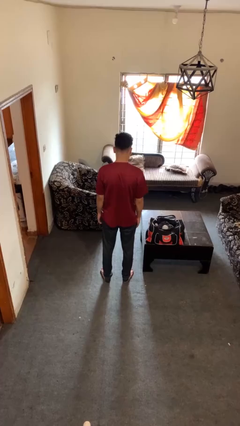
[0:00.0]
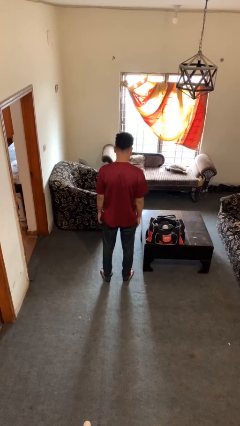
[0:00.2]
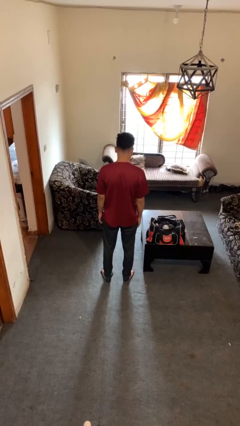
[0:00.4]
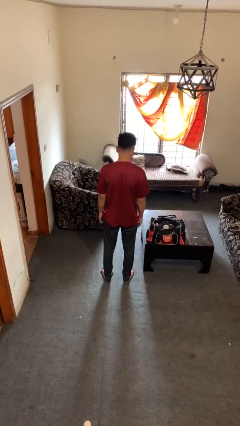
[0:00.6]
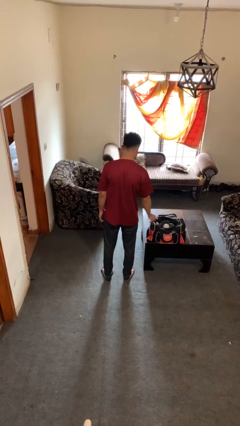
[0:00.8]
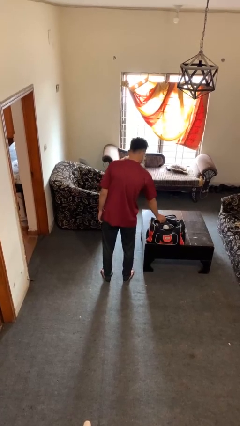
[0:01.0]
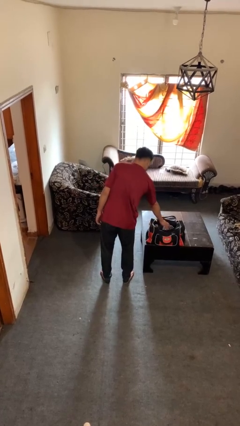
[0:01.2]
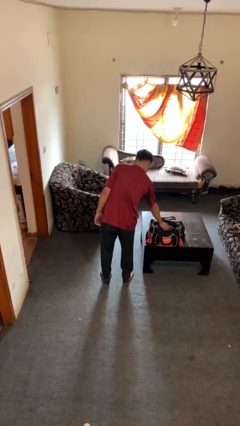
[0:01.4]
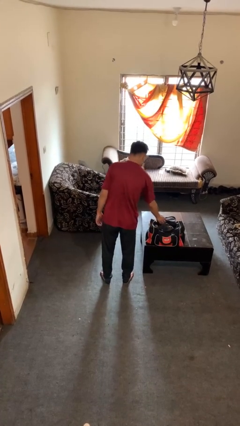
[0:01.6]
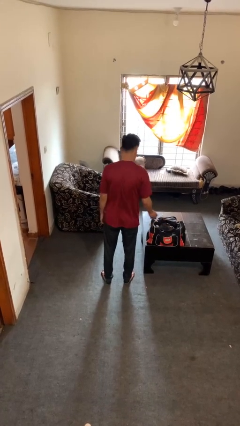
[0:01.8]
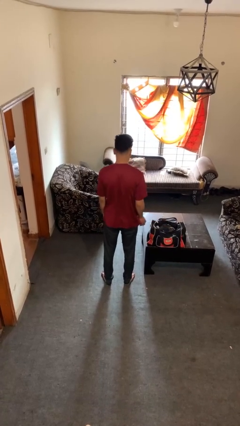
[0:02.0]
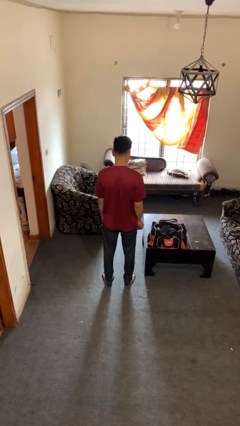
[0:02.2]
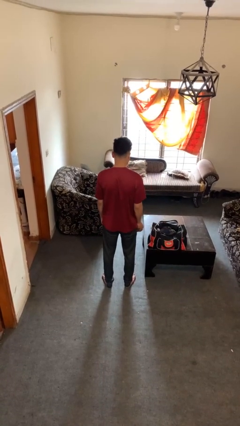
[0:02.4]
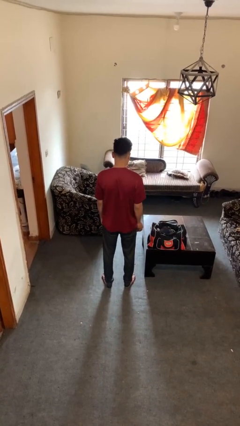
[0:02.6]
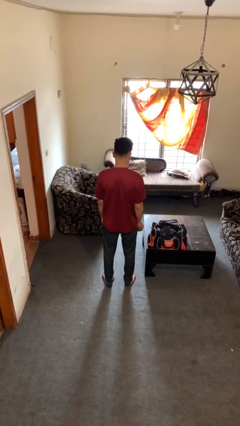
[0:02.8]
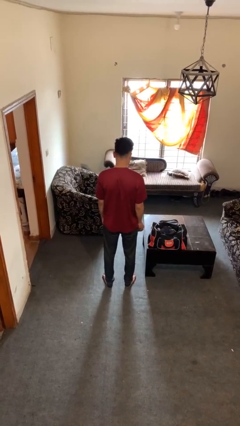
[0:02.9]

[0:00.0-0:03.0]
person takes object from bag

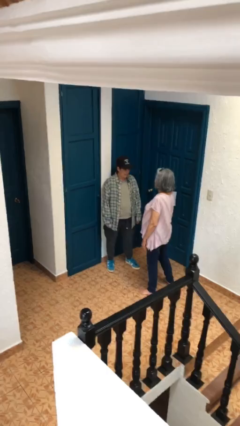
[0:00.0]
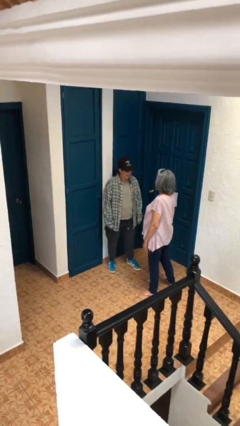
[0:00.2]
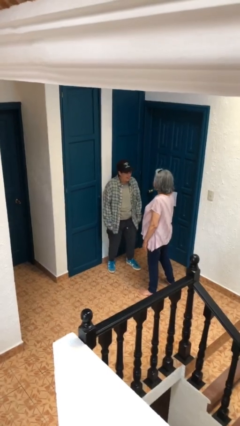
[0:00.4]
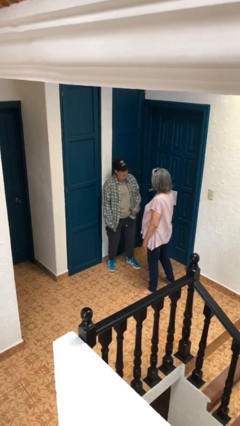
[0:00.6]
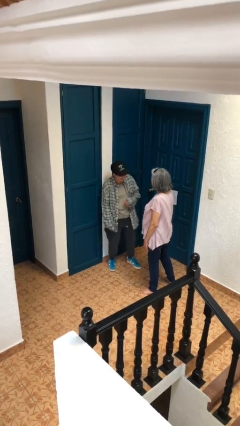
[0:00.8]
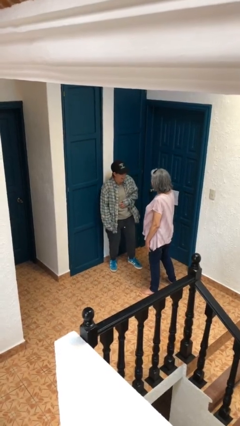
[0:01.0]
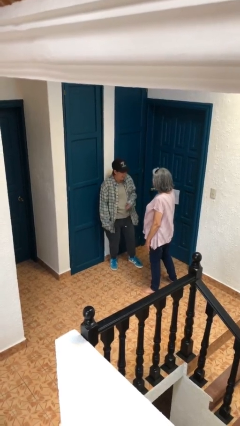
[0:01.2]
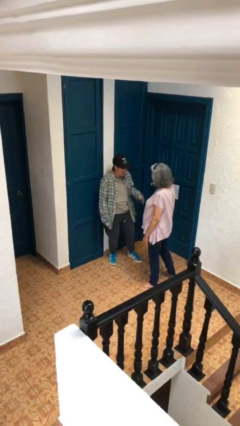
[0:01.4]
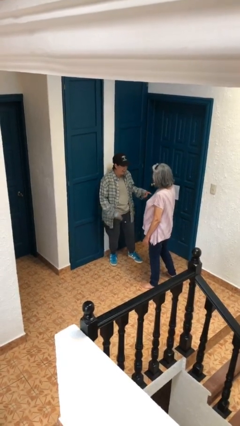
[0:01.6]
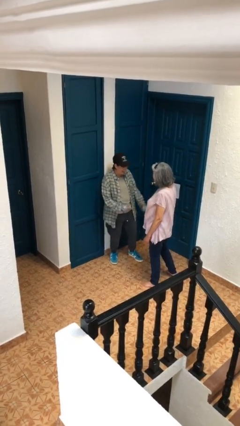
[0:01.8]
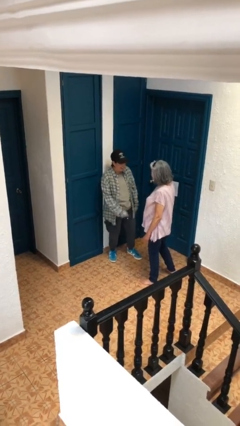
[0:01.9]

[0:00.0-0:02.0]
person laughs with person

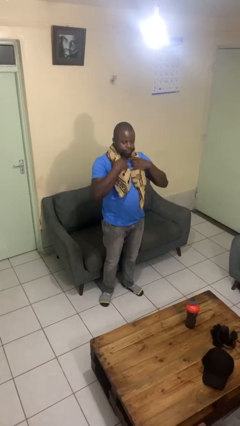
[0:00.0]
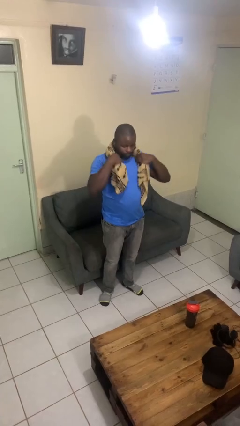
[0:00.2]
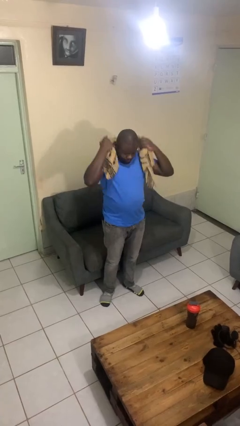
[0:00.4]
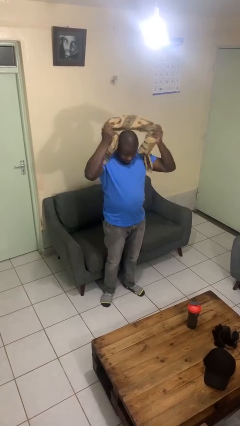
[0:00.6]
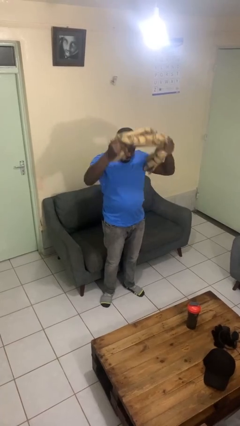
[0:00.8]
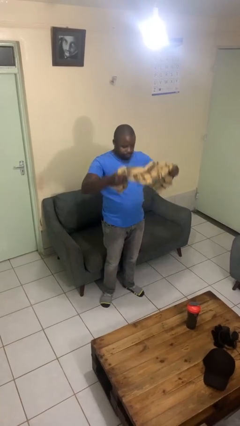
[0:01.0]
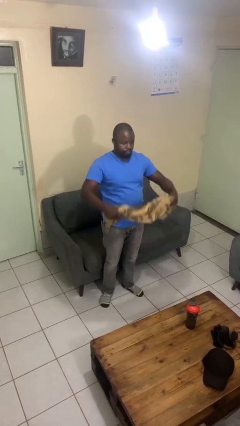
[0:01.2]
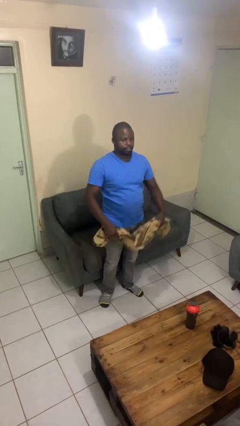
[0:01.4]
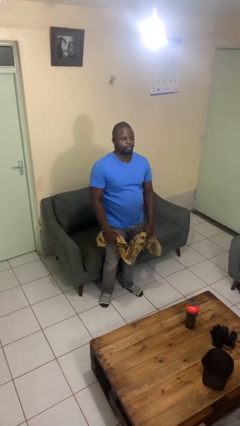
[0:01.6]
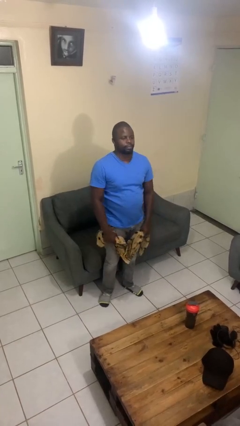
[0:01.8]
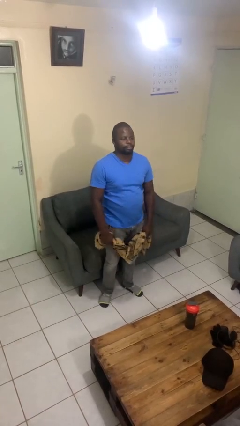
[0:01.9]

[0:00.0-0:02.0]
person takes off scarf

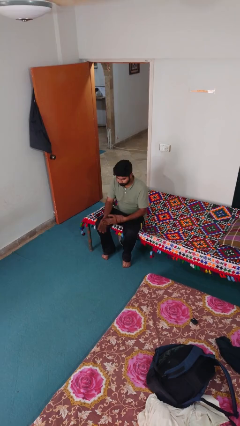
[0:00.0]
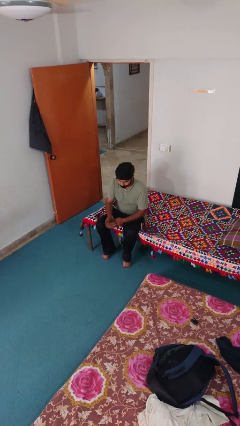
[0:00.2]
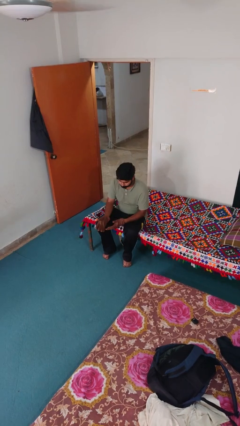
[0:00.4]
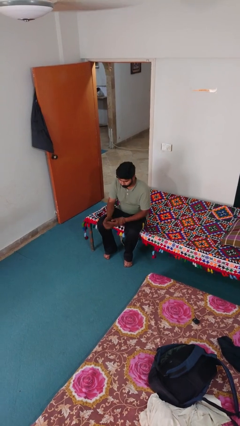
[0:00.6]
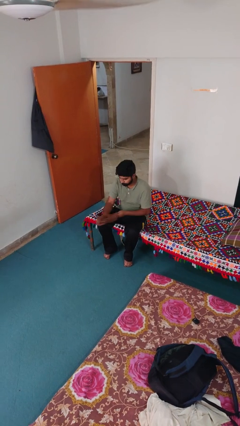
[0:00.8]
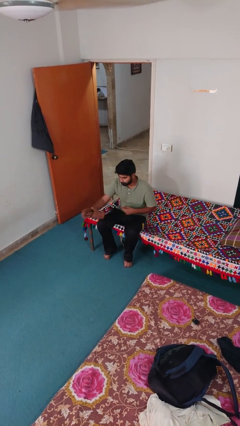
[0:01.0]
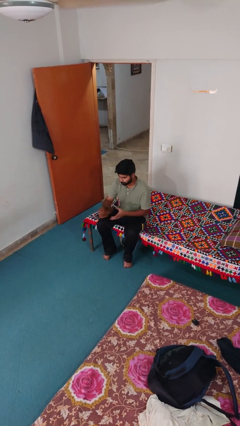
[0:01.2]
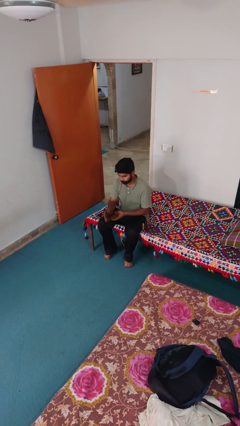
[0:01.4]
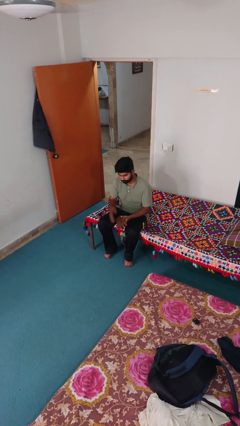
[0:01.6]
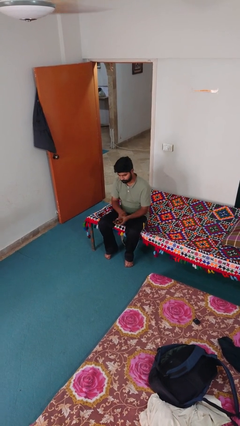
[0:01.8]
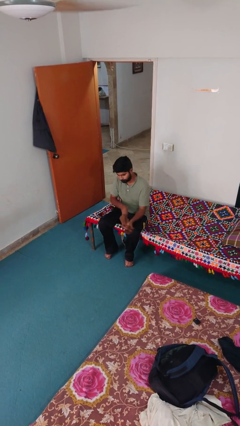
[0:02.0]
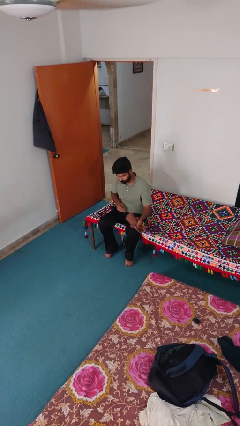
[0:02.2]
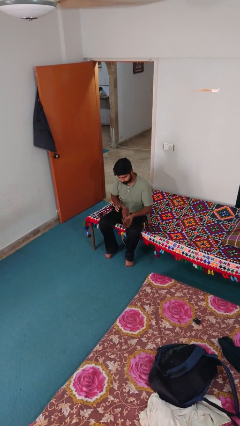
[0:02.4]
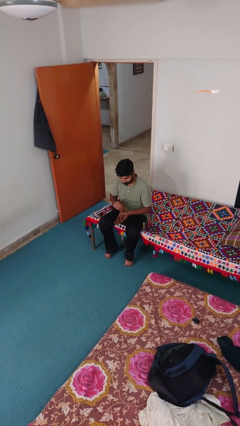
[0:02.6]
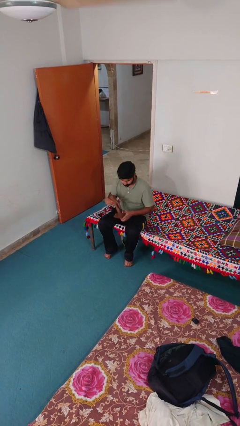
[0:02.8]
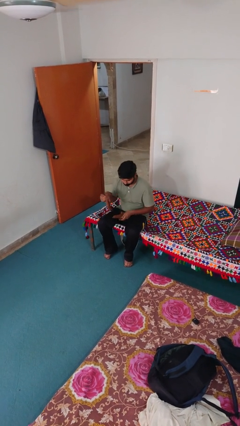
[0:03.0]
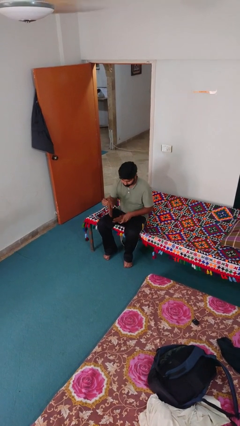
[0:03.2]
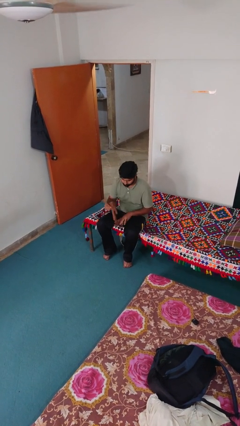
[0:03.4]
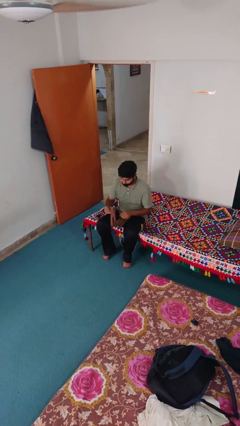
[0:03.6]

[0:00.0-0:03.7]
person takes off gloves

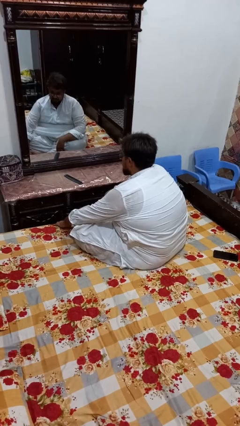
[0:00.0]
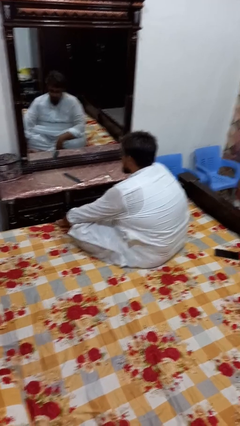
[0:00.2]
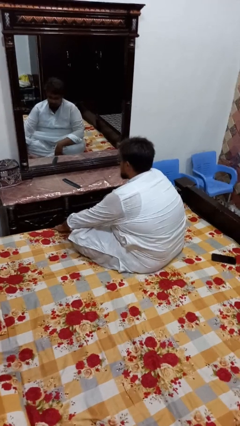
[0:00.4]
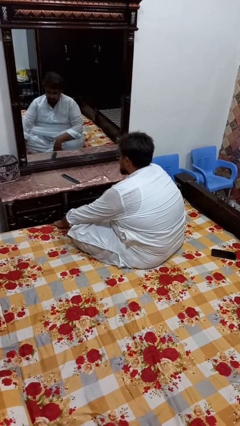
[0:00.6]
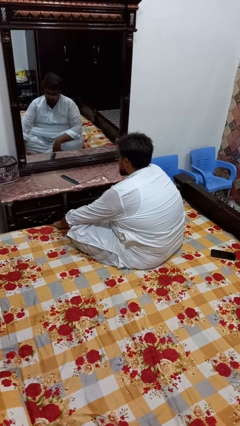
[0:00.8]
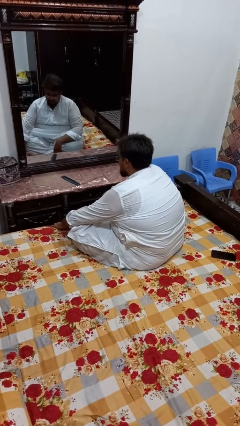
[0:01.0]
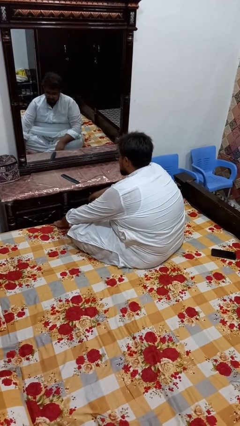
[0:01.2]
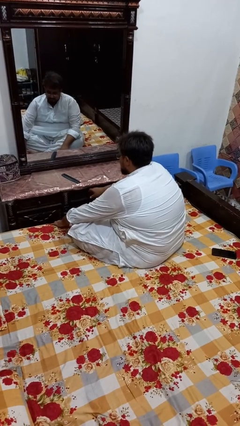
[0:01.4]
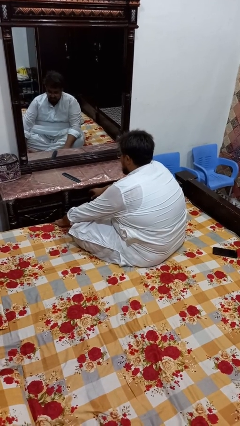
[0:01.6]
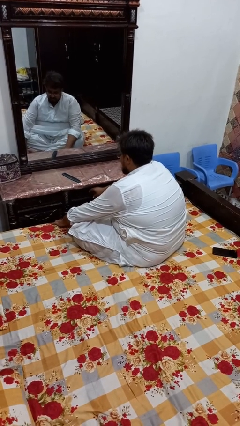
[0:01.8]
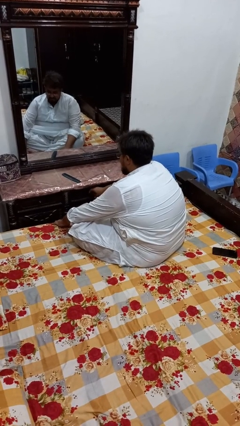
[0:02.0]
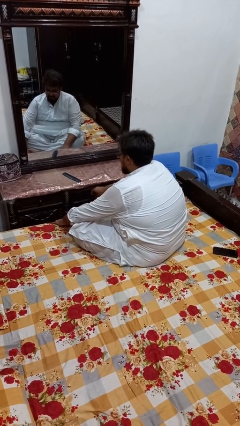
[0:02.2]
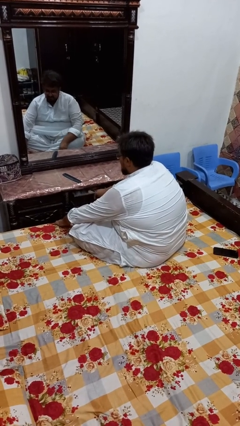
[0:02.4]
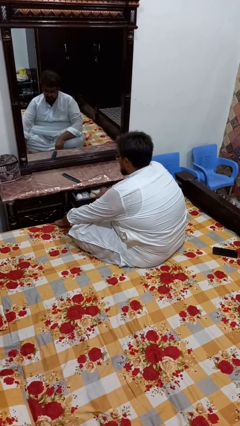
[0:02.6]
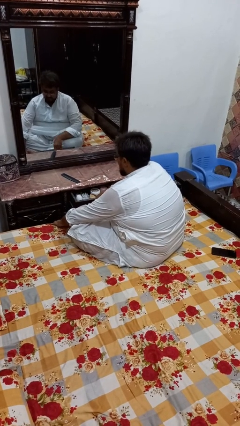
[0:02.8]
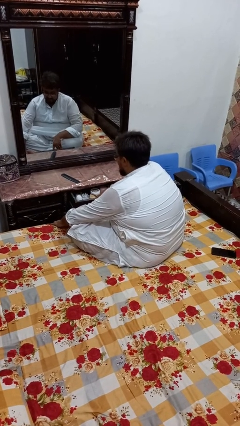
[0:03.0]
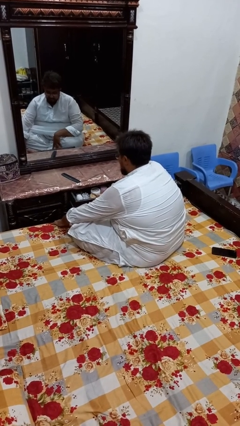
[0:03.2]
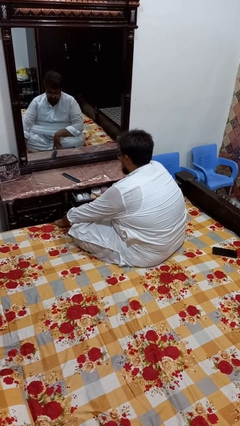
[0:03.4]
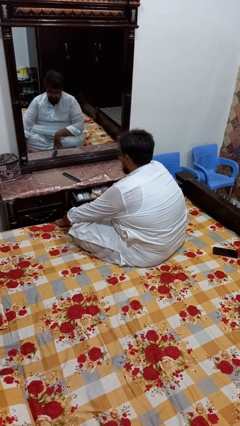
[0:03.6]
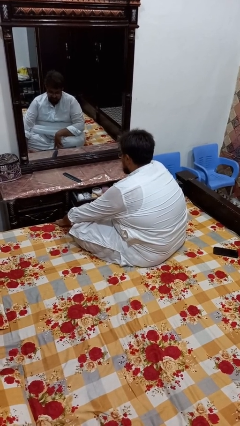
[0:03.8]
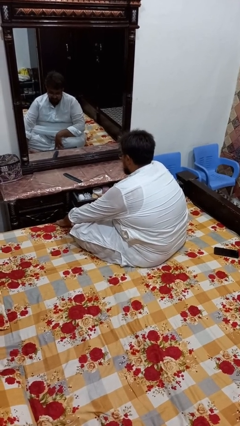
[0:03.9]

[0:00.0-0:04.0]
person opens dresser drawer

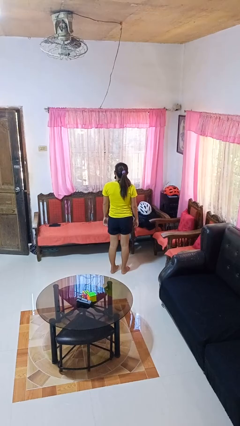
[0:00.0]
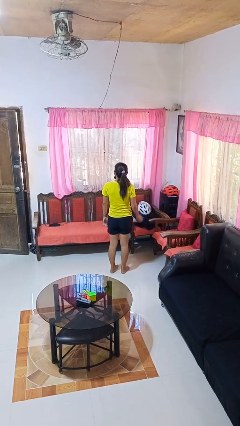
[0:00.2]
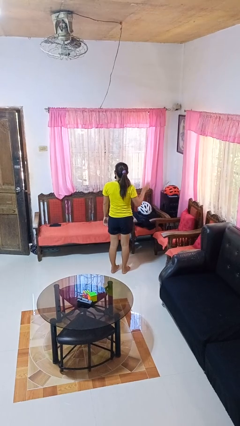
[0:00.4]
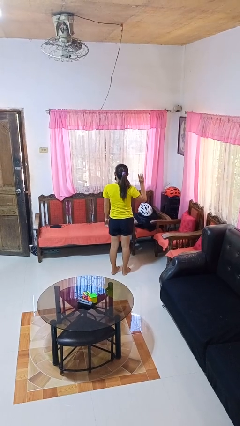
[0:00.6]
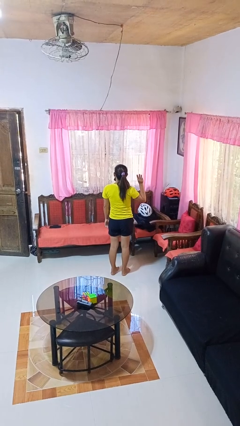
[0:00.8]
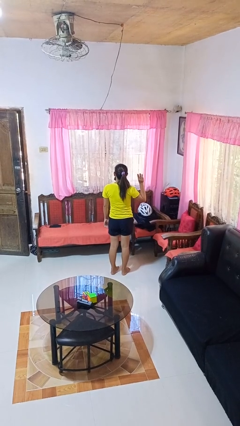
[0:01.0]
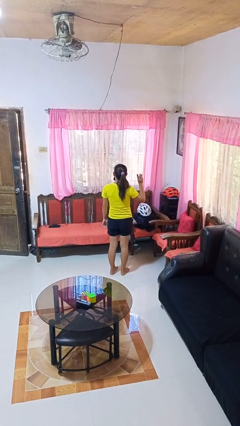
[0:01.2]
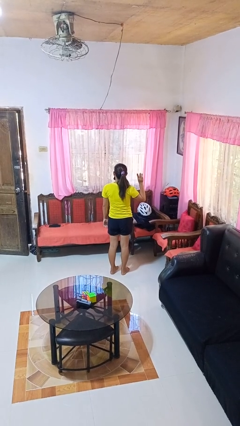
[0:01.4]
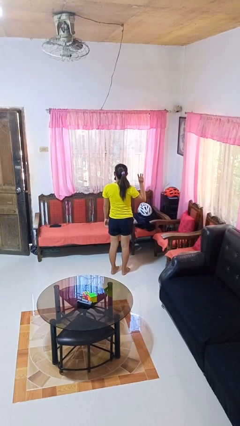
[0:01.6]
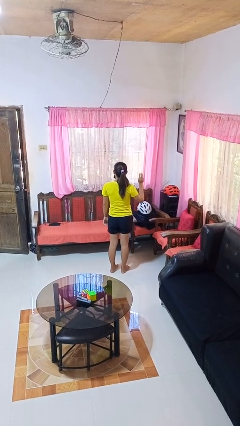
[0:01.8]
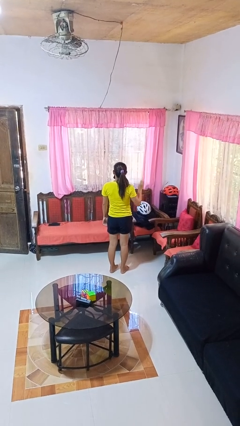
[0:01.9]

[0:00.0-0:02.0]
person gestures number three

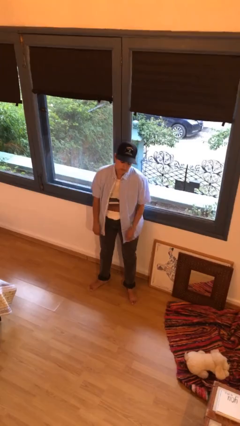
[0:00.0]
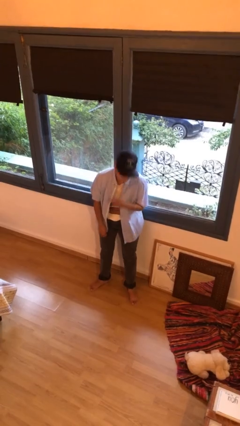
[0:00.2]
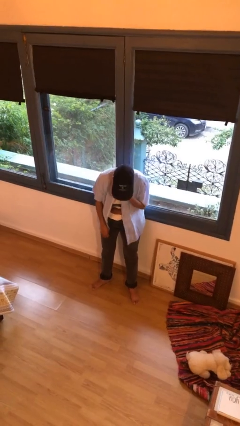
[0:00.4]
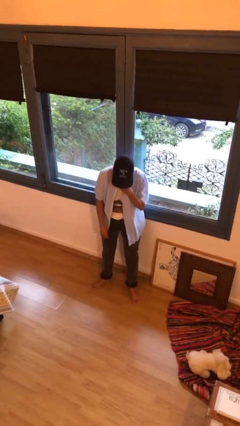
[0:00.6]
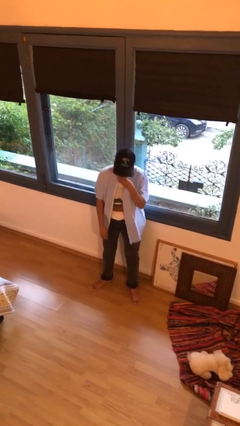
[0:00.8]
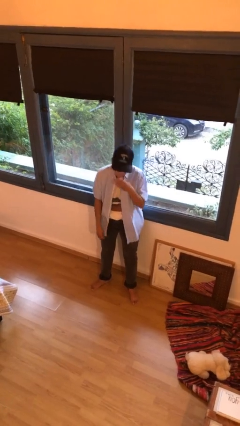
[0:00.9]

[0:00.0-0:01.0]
person sneezes into hand
